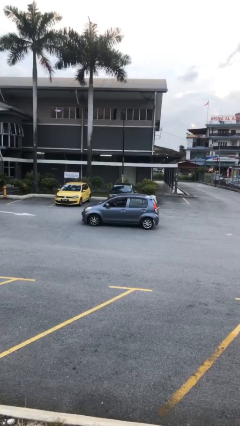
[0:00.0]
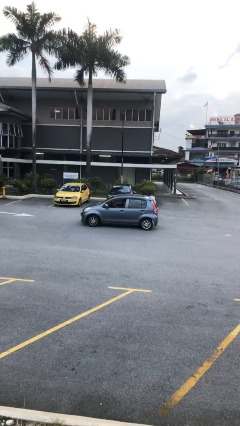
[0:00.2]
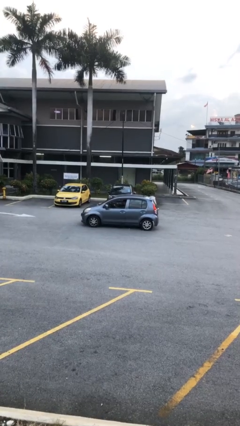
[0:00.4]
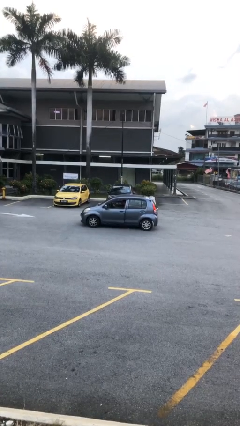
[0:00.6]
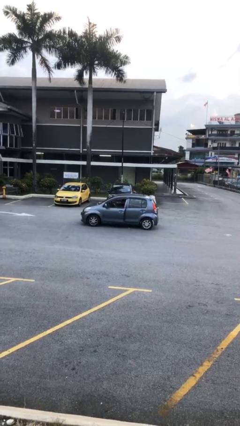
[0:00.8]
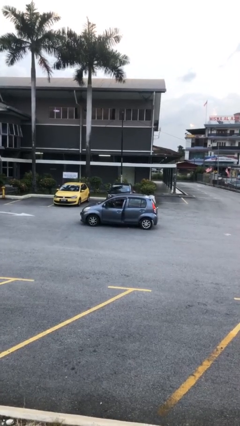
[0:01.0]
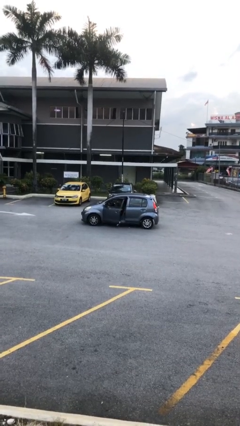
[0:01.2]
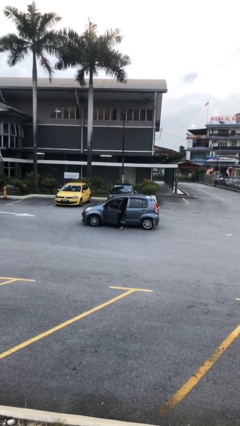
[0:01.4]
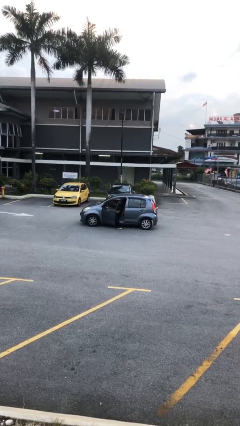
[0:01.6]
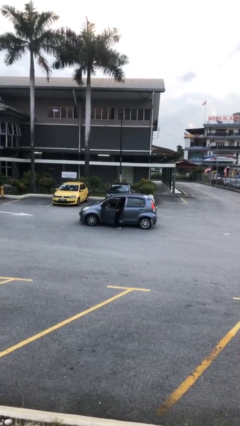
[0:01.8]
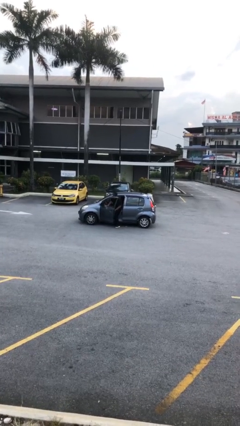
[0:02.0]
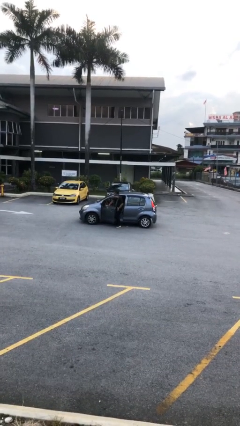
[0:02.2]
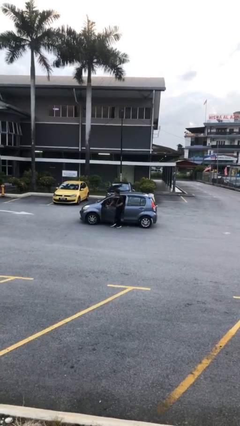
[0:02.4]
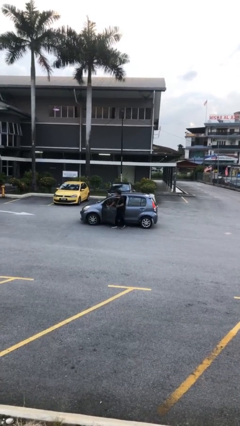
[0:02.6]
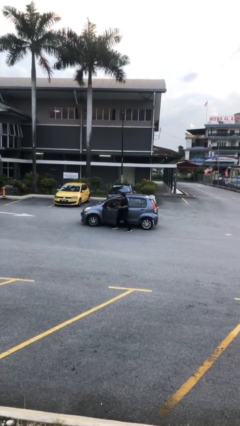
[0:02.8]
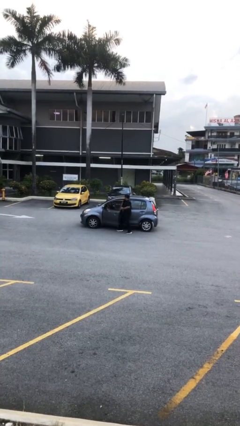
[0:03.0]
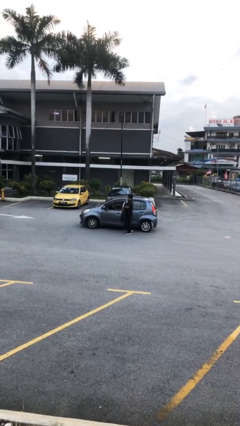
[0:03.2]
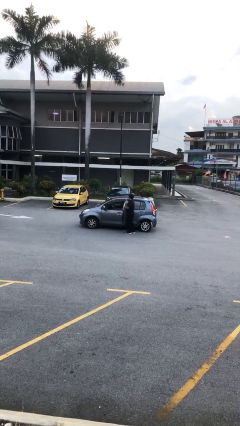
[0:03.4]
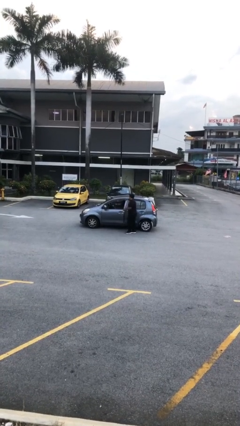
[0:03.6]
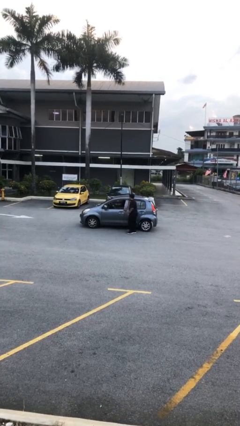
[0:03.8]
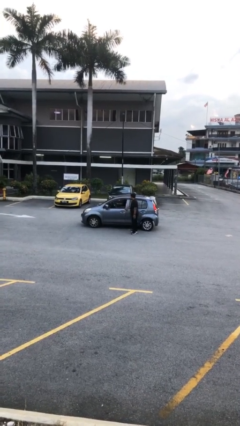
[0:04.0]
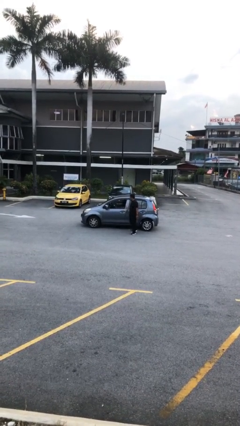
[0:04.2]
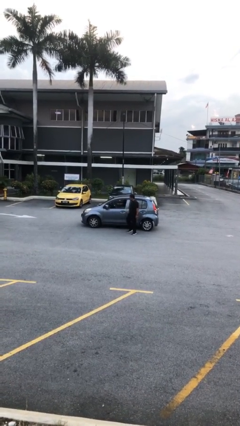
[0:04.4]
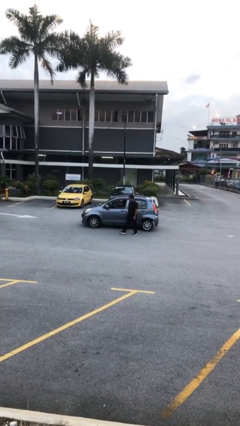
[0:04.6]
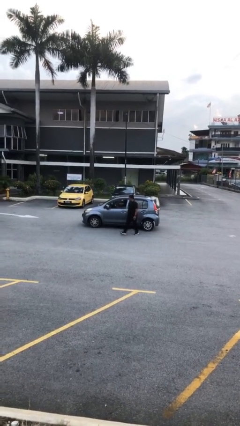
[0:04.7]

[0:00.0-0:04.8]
car drops off person

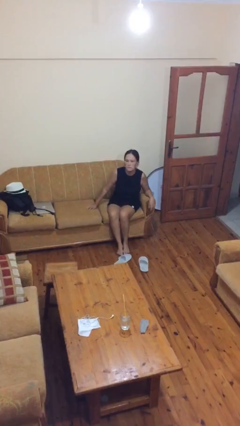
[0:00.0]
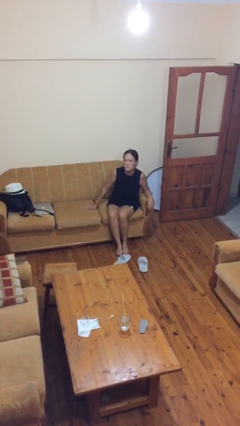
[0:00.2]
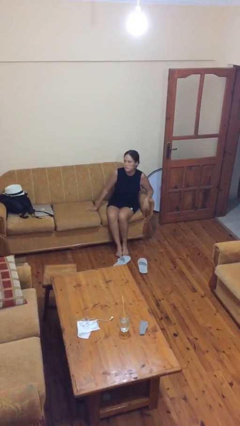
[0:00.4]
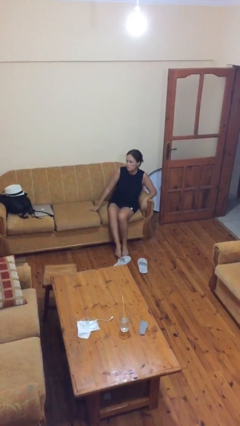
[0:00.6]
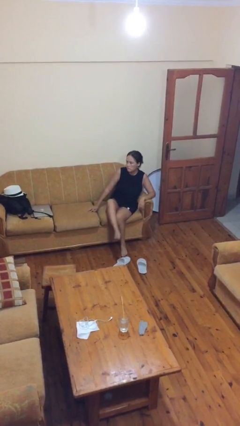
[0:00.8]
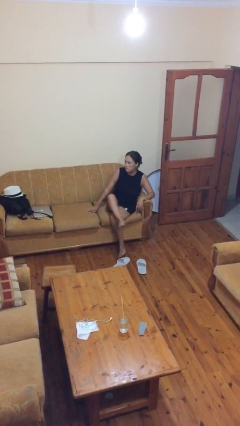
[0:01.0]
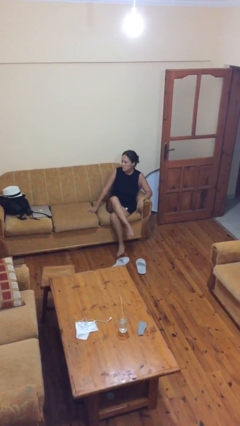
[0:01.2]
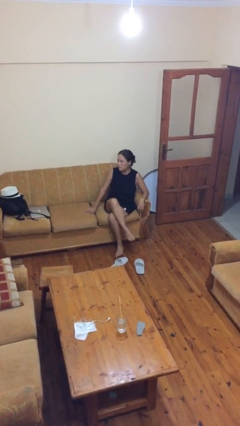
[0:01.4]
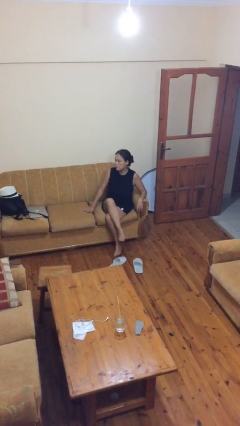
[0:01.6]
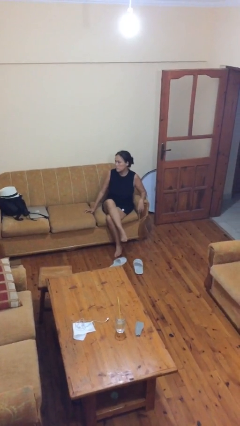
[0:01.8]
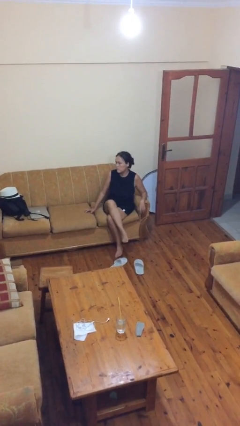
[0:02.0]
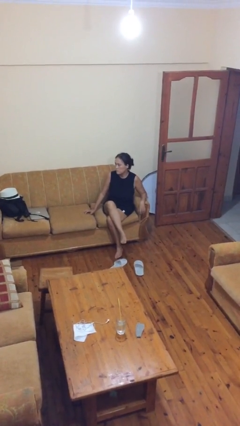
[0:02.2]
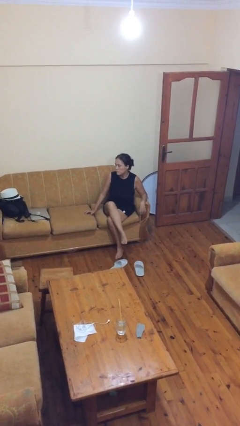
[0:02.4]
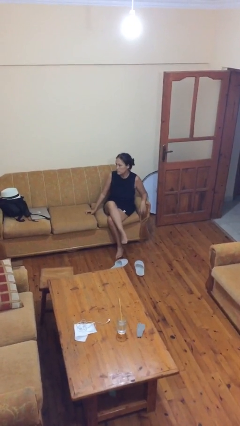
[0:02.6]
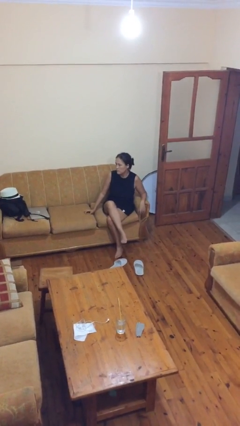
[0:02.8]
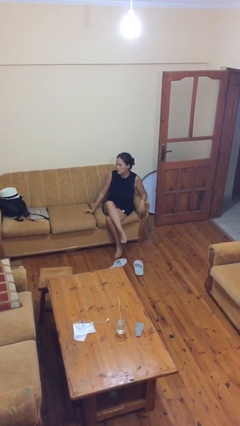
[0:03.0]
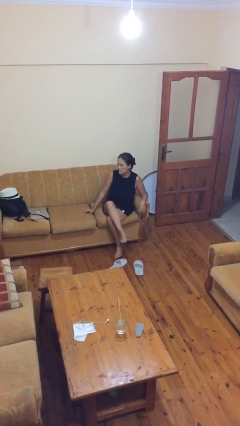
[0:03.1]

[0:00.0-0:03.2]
person crosses legs

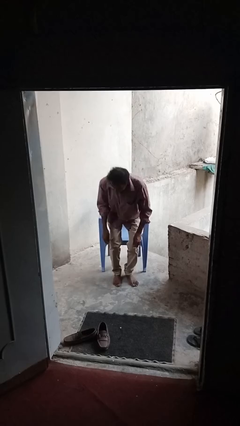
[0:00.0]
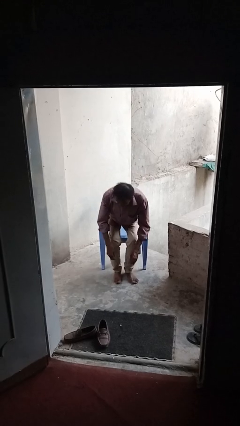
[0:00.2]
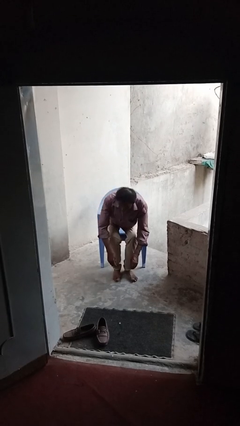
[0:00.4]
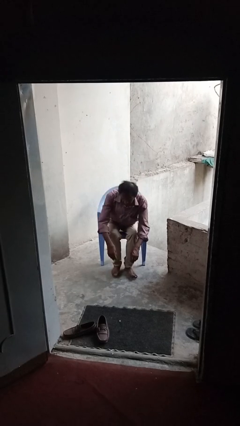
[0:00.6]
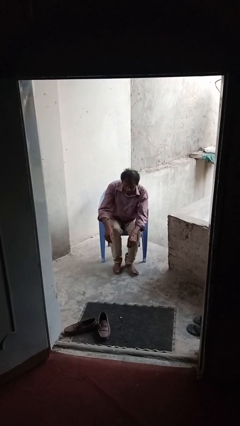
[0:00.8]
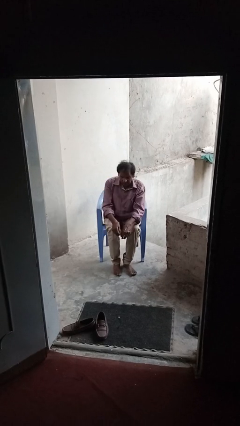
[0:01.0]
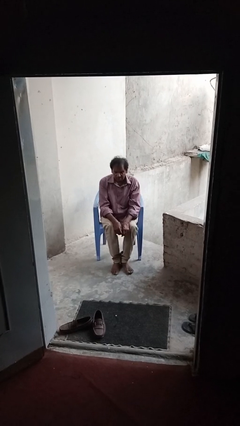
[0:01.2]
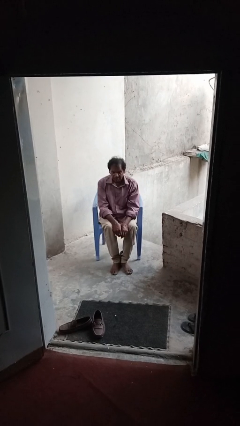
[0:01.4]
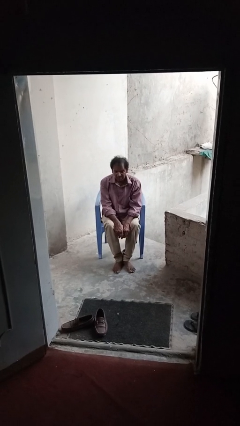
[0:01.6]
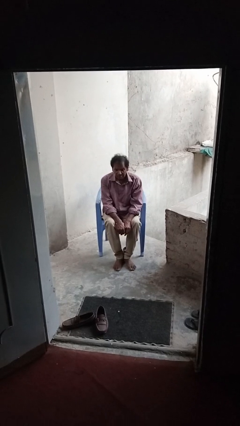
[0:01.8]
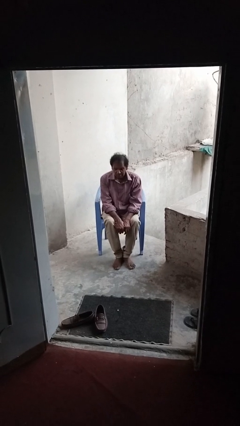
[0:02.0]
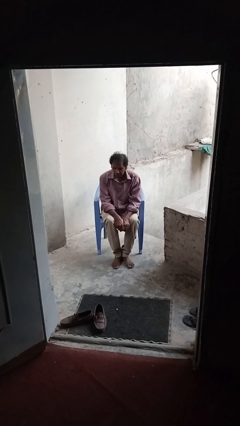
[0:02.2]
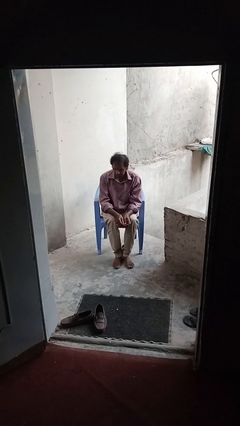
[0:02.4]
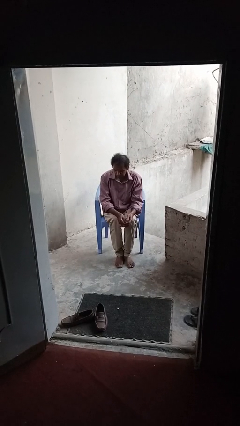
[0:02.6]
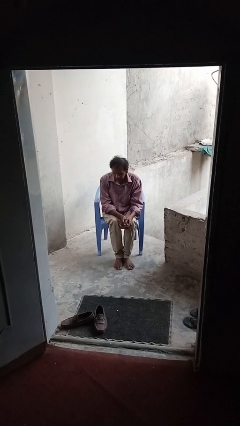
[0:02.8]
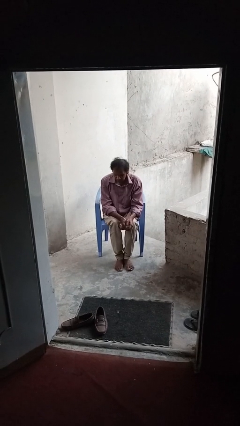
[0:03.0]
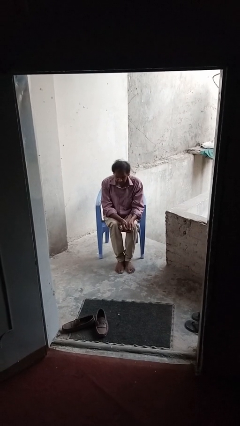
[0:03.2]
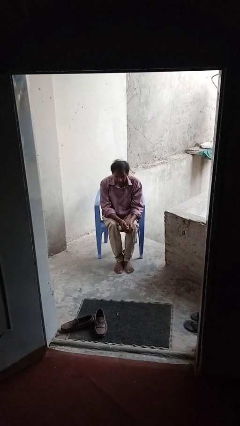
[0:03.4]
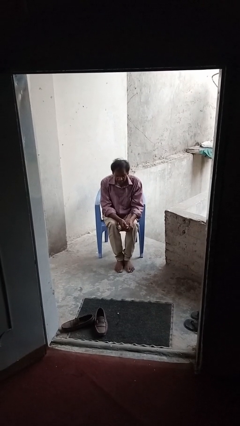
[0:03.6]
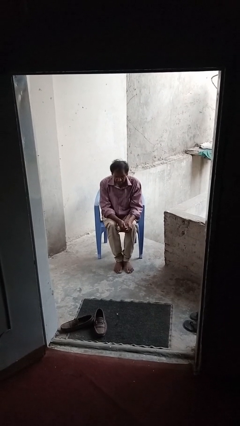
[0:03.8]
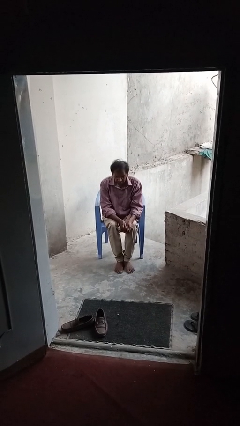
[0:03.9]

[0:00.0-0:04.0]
person sits down

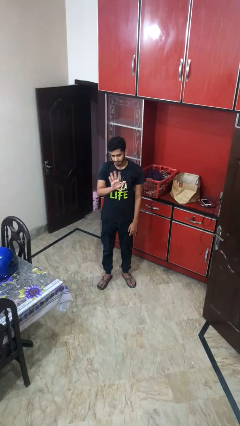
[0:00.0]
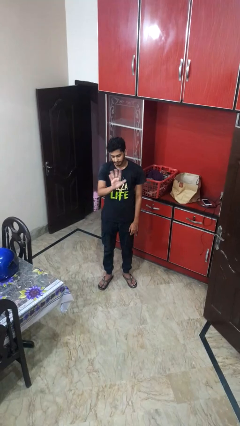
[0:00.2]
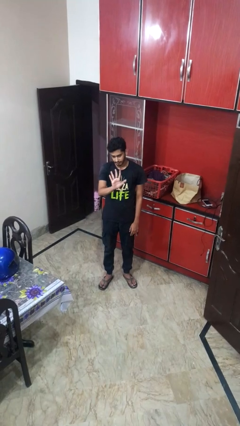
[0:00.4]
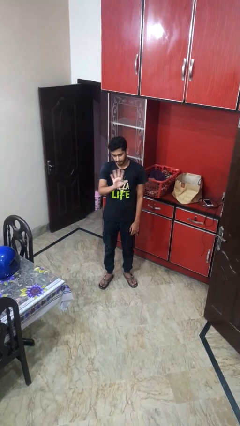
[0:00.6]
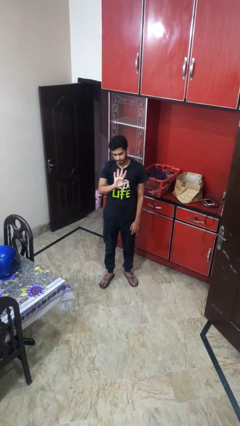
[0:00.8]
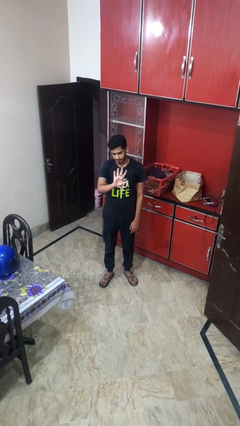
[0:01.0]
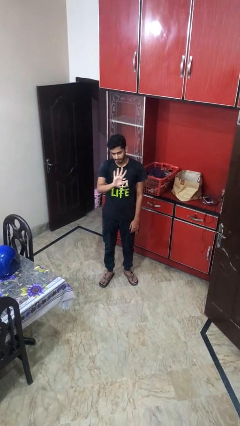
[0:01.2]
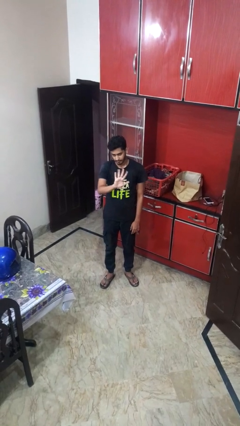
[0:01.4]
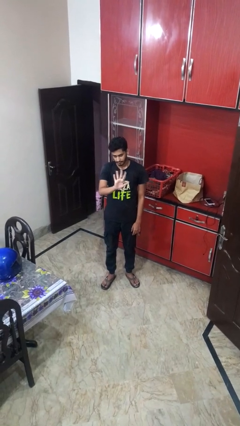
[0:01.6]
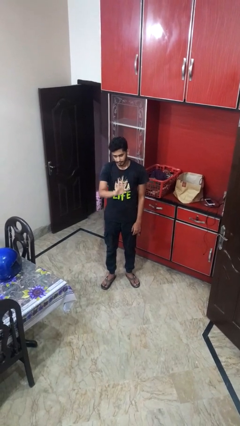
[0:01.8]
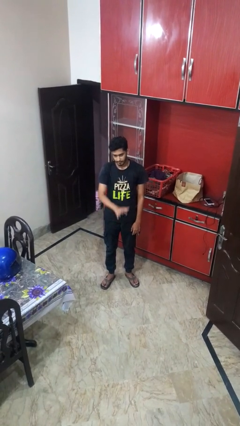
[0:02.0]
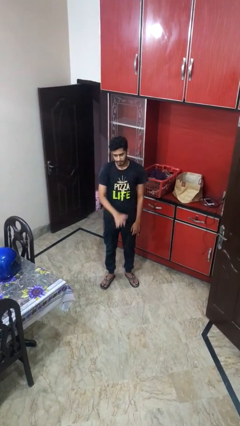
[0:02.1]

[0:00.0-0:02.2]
person waves at person

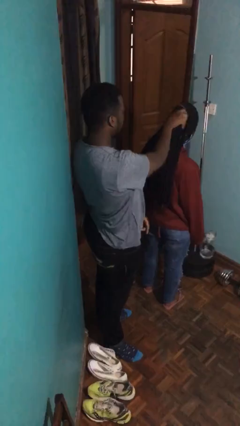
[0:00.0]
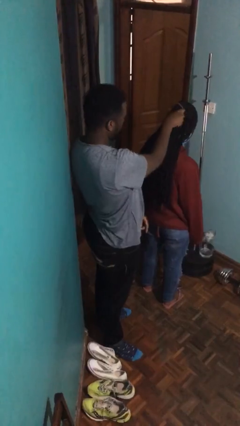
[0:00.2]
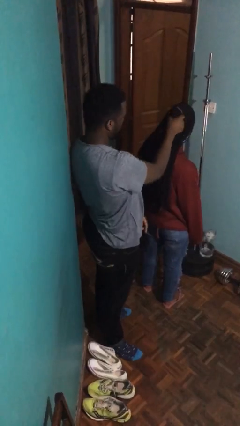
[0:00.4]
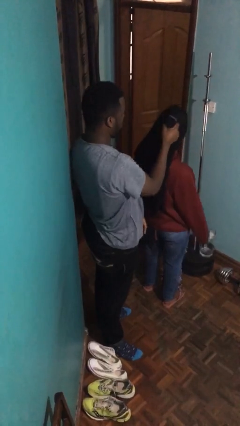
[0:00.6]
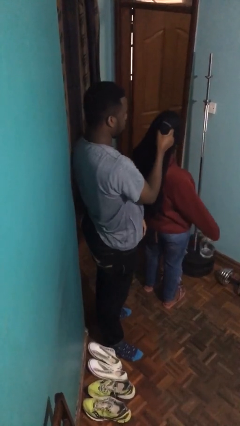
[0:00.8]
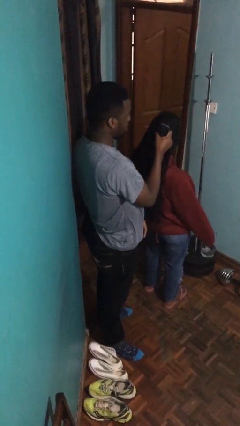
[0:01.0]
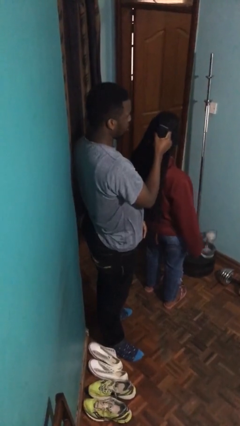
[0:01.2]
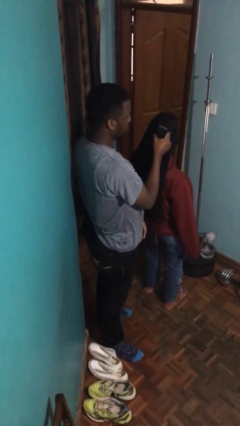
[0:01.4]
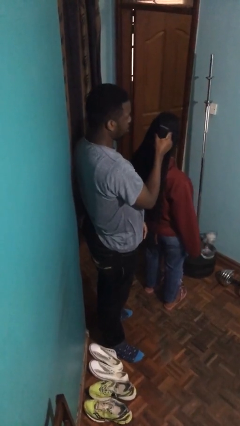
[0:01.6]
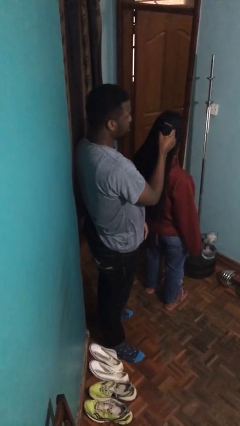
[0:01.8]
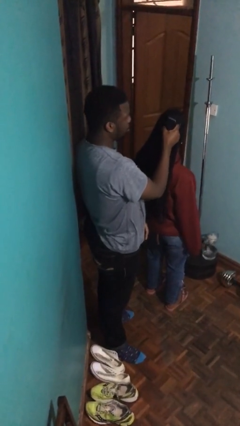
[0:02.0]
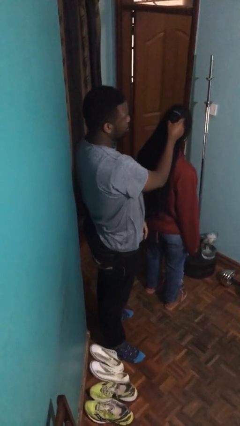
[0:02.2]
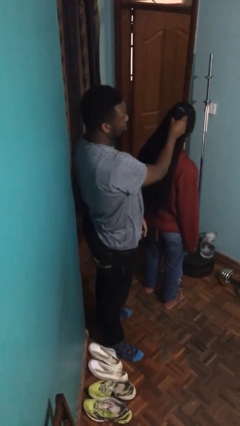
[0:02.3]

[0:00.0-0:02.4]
person grabs person by hair

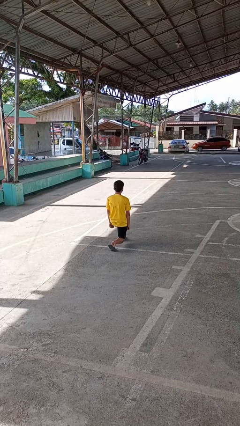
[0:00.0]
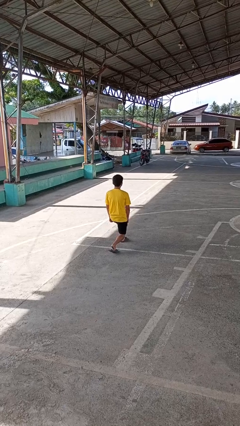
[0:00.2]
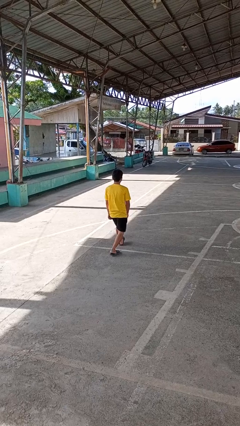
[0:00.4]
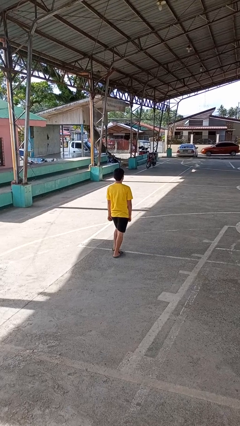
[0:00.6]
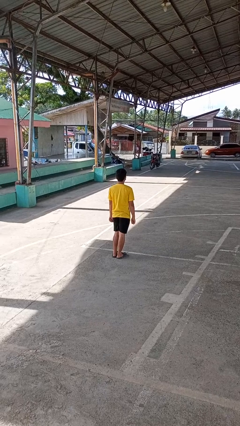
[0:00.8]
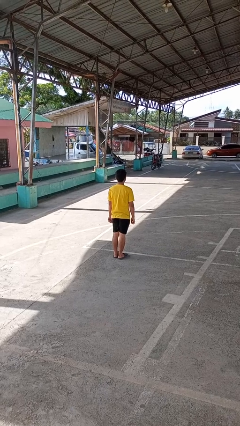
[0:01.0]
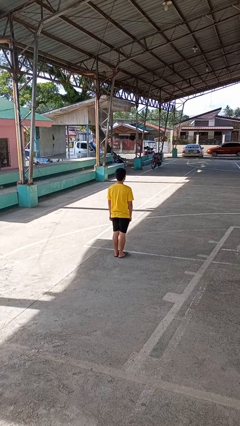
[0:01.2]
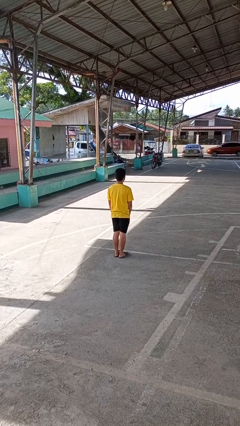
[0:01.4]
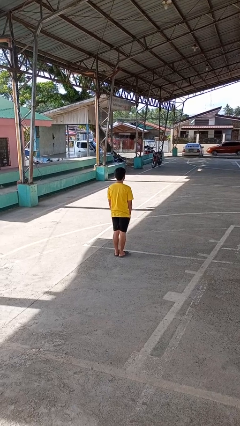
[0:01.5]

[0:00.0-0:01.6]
person stands up from floor
